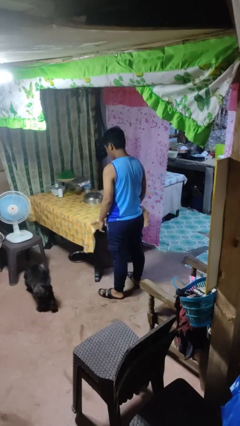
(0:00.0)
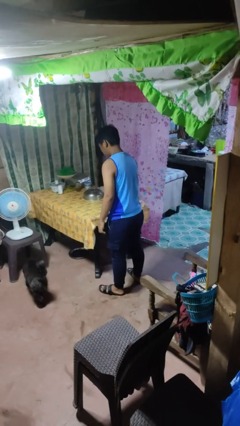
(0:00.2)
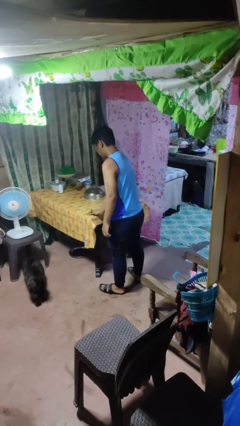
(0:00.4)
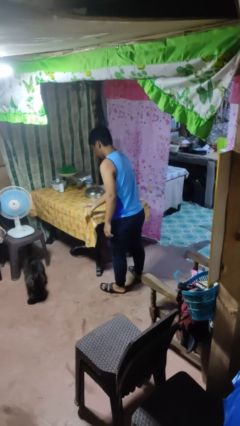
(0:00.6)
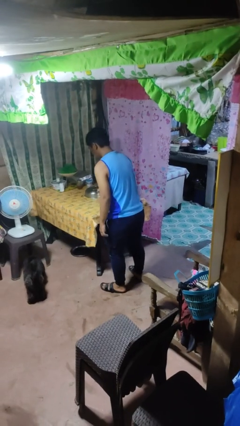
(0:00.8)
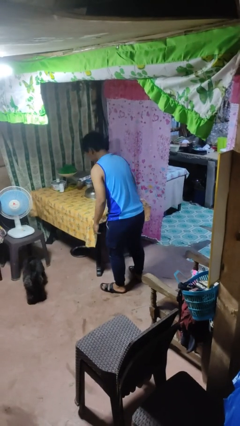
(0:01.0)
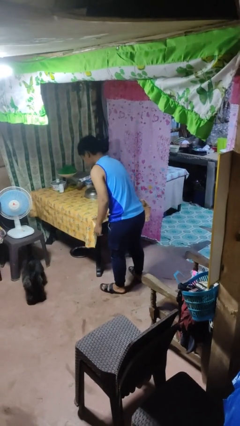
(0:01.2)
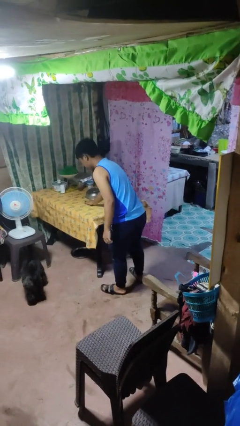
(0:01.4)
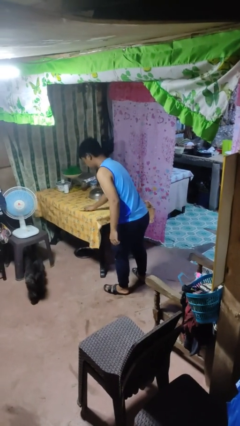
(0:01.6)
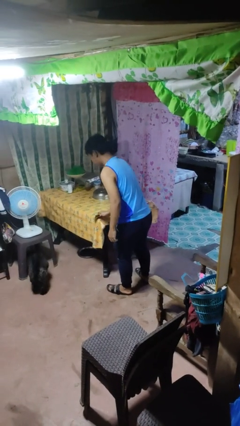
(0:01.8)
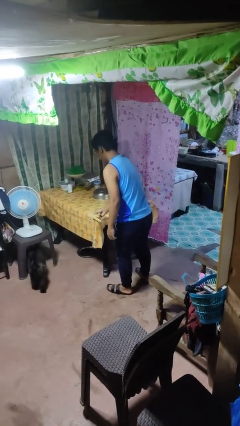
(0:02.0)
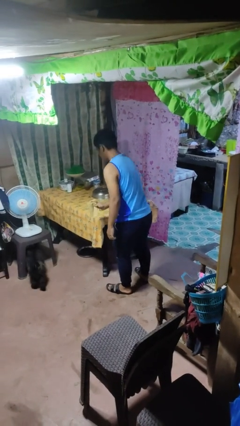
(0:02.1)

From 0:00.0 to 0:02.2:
person cleans table with rag

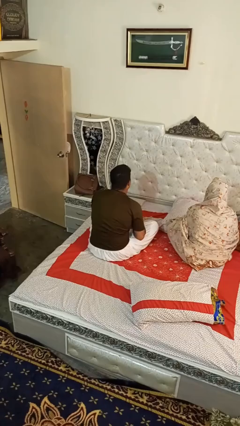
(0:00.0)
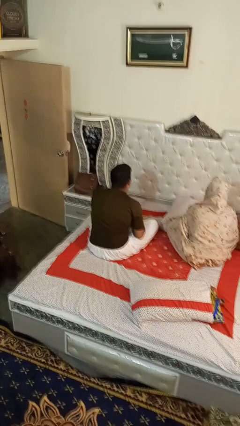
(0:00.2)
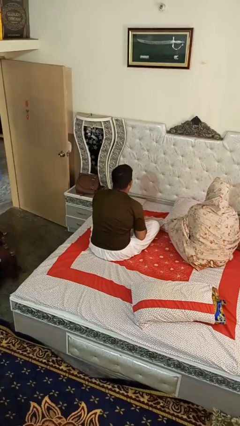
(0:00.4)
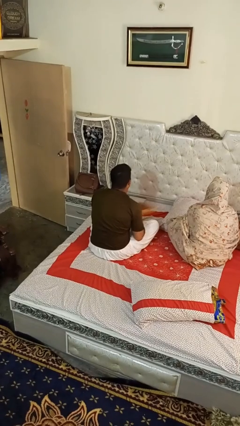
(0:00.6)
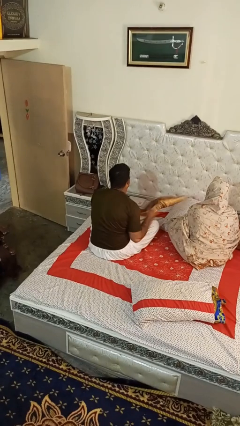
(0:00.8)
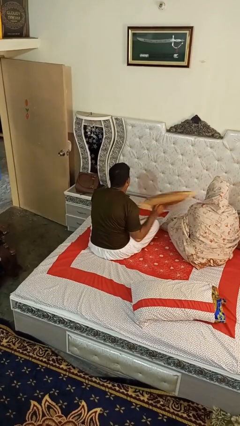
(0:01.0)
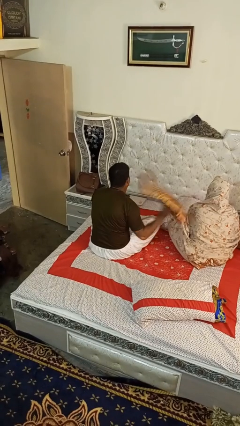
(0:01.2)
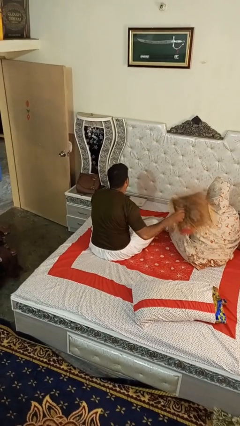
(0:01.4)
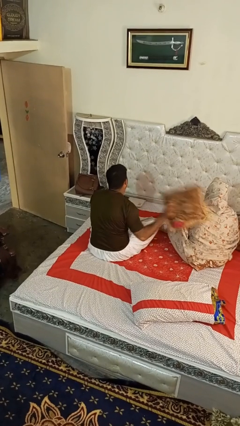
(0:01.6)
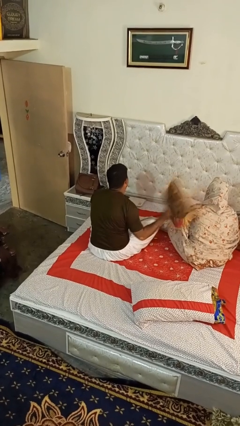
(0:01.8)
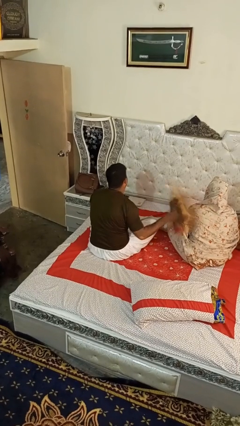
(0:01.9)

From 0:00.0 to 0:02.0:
person hits person with pillow

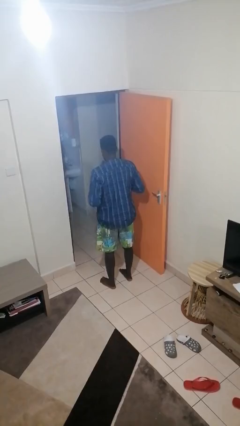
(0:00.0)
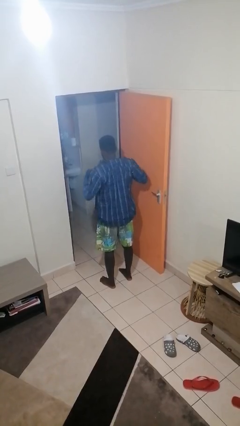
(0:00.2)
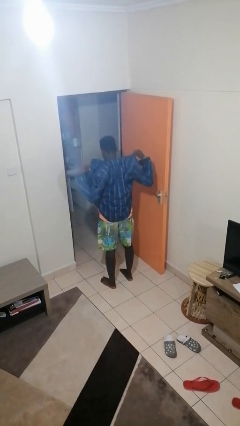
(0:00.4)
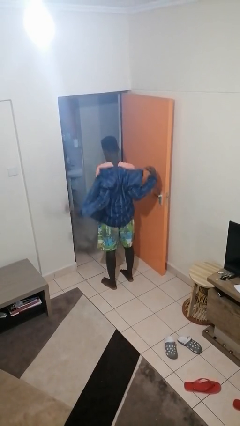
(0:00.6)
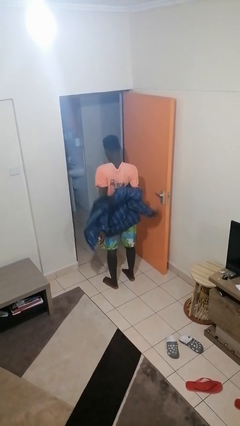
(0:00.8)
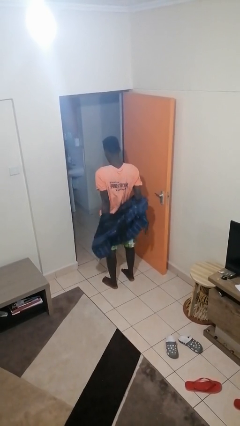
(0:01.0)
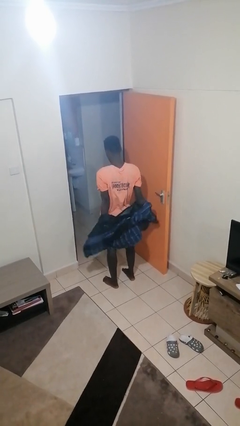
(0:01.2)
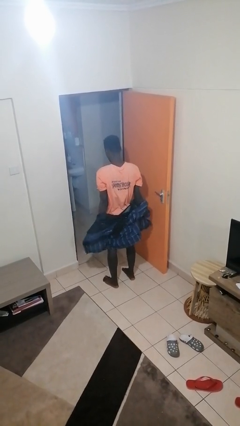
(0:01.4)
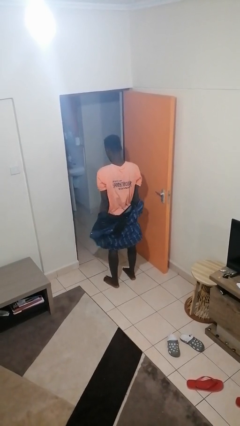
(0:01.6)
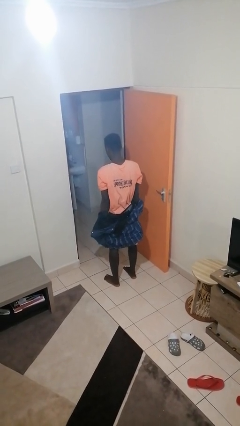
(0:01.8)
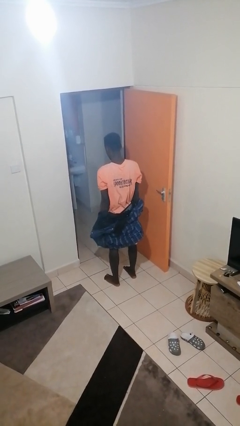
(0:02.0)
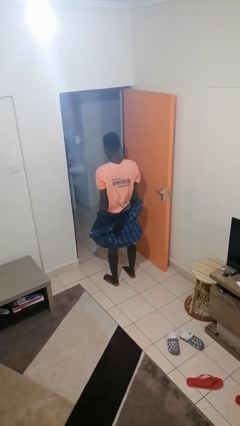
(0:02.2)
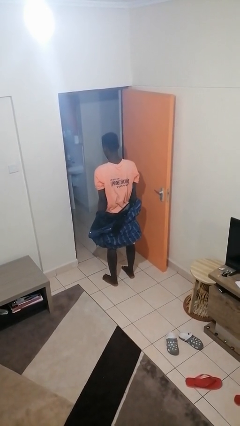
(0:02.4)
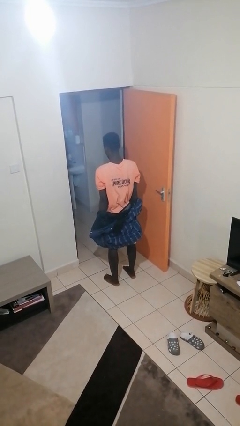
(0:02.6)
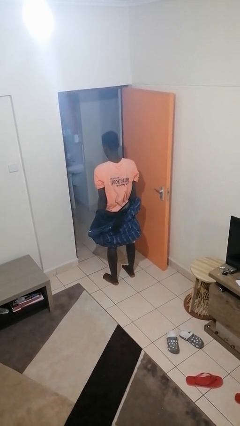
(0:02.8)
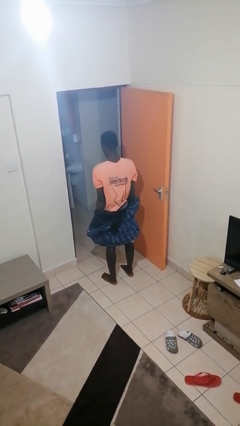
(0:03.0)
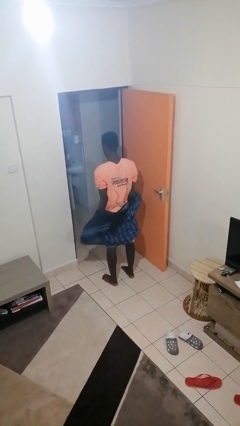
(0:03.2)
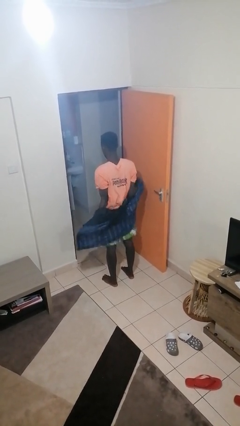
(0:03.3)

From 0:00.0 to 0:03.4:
person takes off jacket

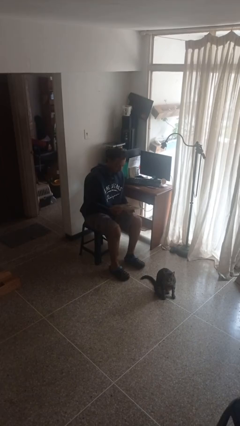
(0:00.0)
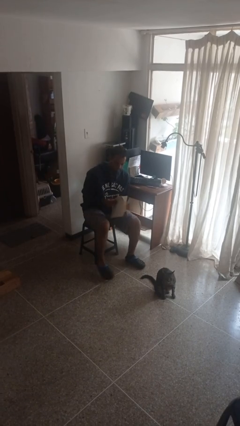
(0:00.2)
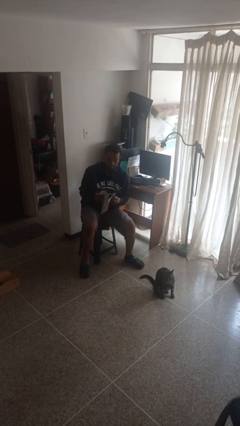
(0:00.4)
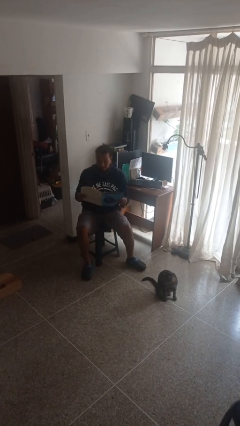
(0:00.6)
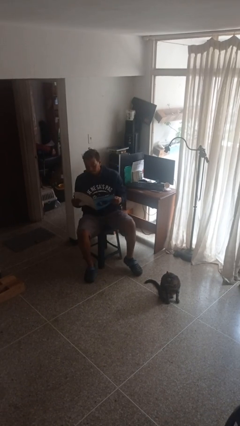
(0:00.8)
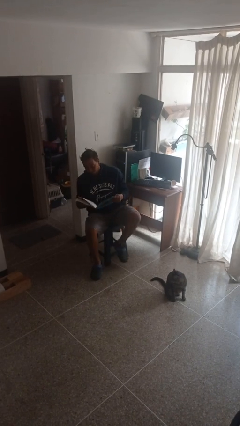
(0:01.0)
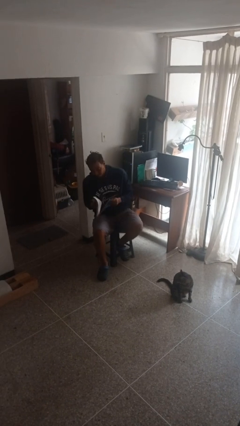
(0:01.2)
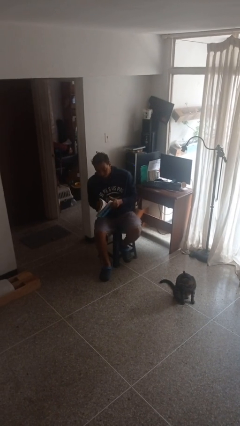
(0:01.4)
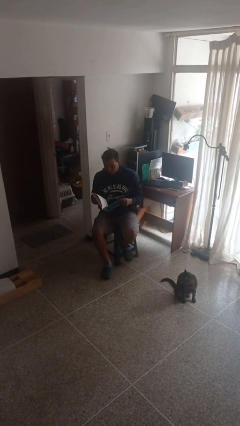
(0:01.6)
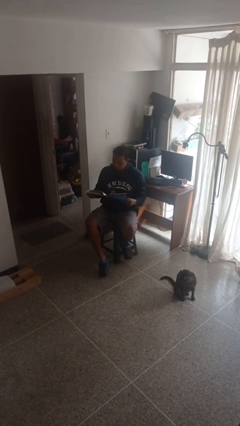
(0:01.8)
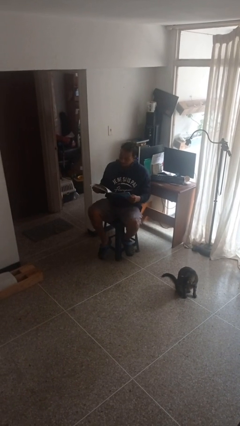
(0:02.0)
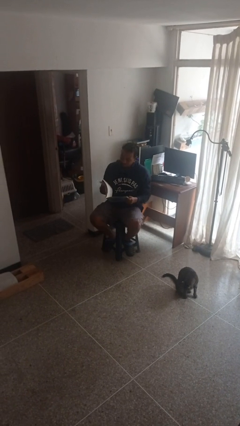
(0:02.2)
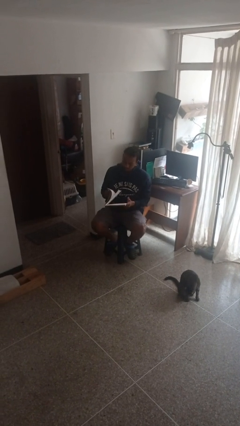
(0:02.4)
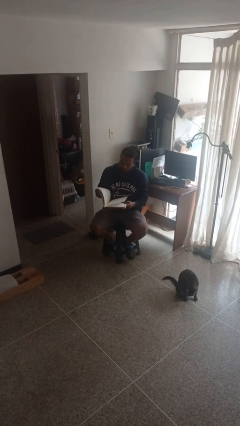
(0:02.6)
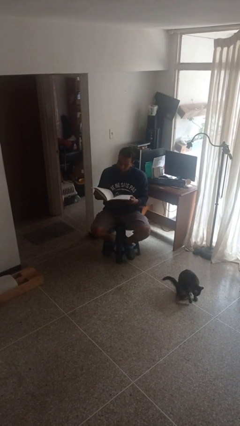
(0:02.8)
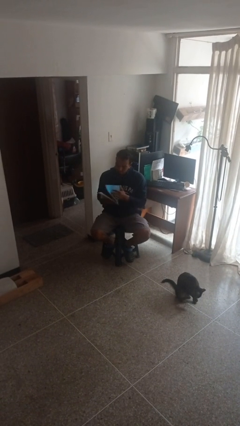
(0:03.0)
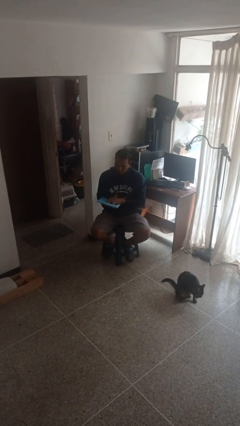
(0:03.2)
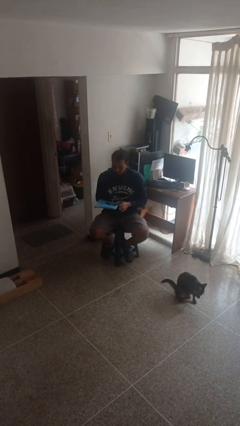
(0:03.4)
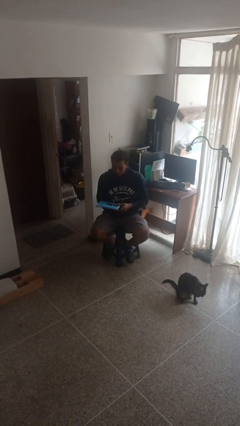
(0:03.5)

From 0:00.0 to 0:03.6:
person reads magazine

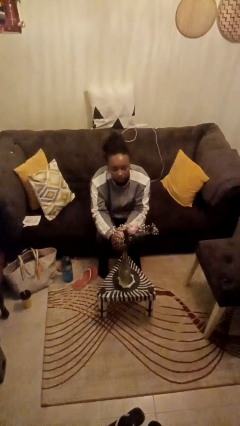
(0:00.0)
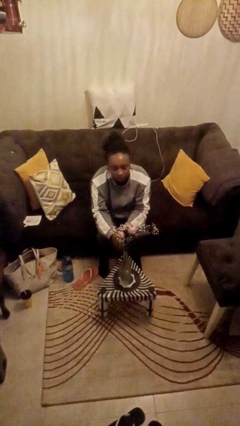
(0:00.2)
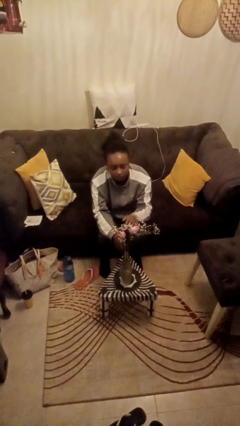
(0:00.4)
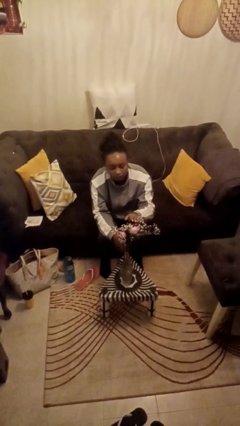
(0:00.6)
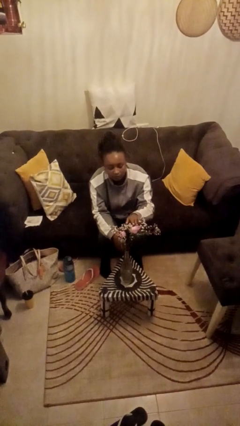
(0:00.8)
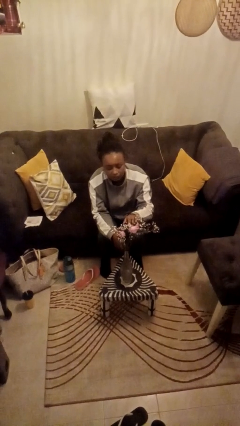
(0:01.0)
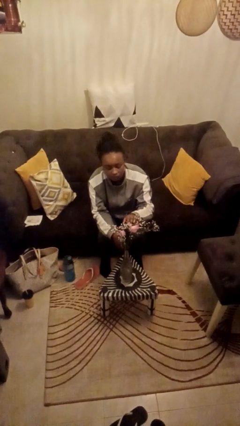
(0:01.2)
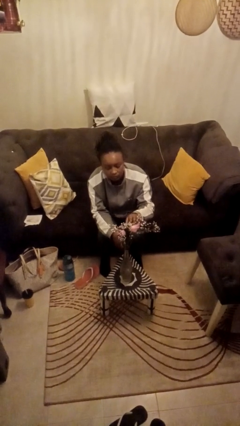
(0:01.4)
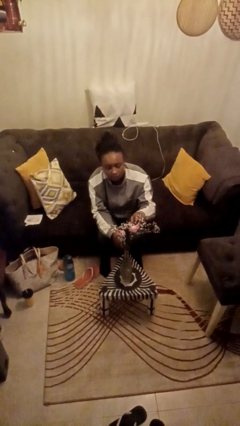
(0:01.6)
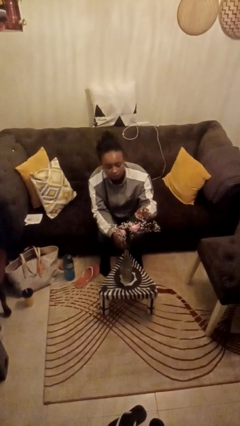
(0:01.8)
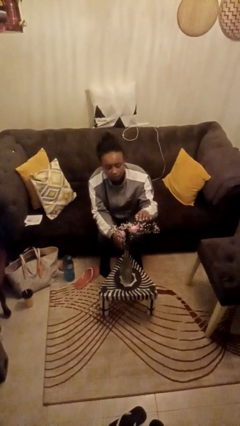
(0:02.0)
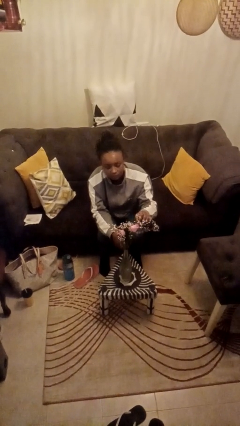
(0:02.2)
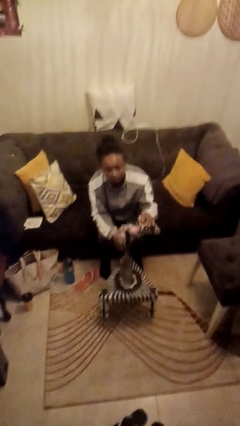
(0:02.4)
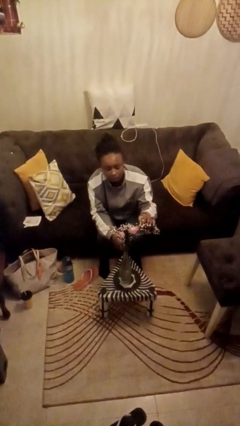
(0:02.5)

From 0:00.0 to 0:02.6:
person arranges flowers in vase

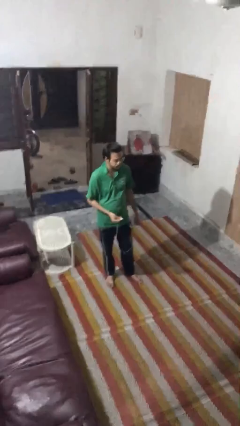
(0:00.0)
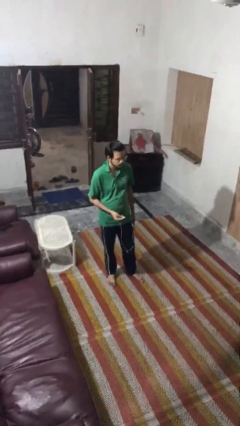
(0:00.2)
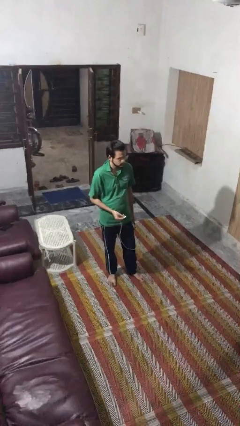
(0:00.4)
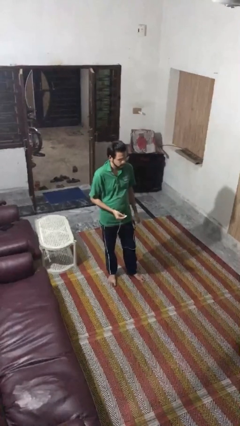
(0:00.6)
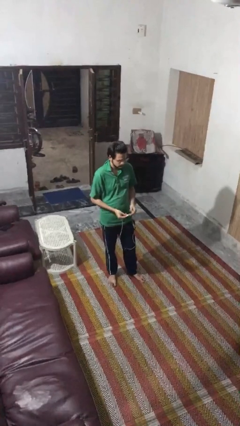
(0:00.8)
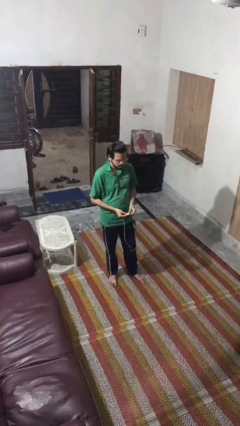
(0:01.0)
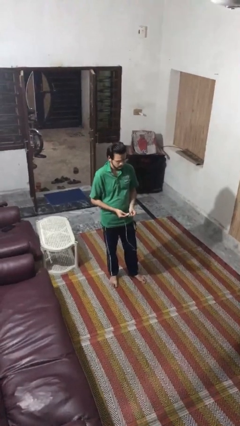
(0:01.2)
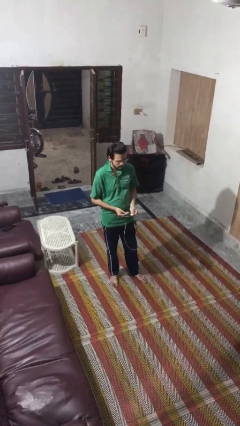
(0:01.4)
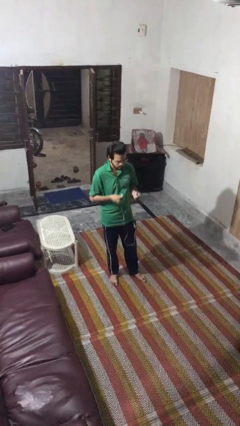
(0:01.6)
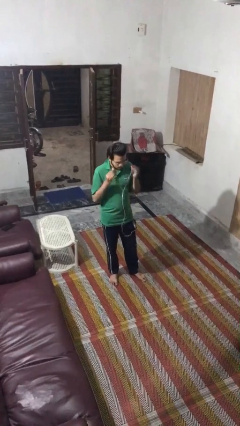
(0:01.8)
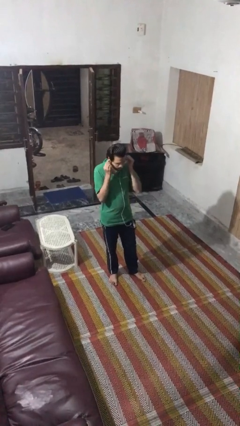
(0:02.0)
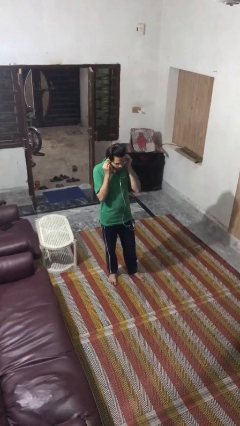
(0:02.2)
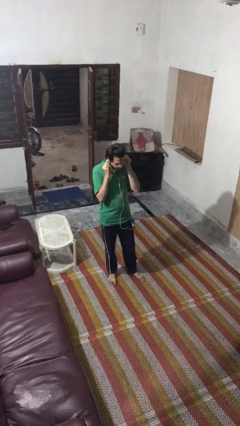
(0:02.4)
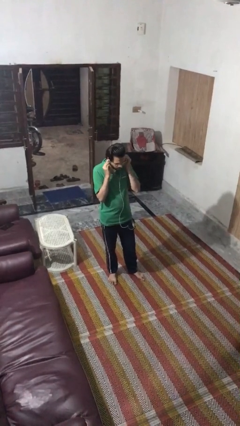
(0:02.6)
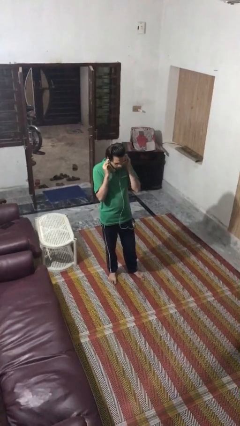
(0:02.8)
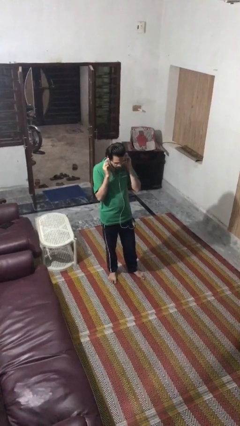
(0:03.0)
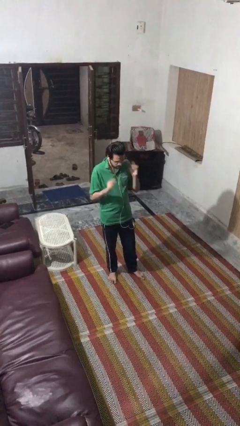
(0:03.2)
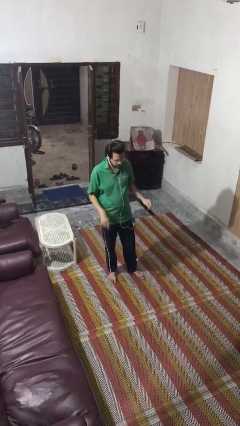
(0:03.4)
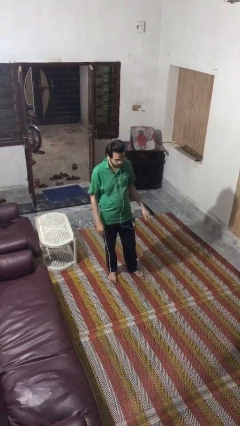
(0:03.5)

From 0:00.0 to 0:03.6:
person puts on headphones
